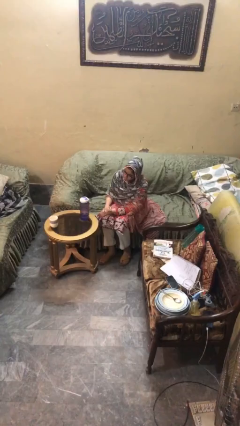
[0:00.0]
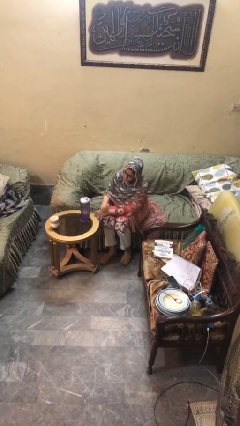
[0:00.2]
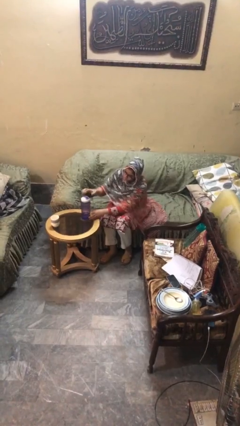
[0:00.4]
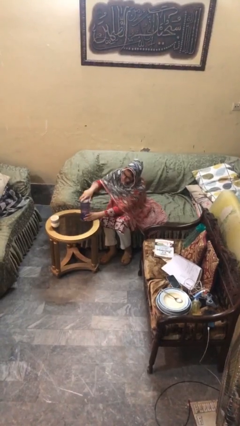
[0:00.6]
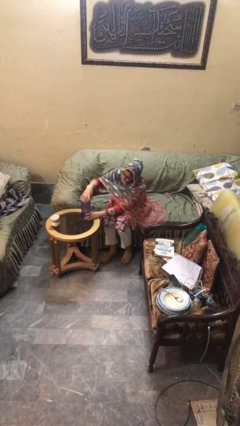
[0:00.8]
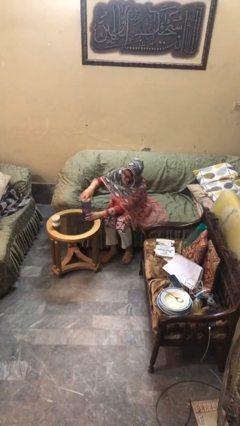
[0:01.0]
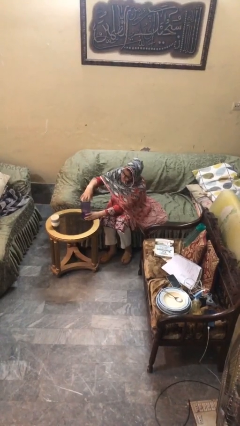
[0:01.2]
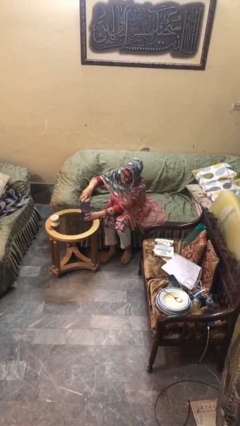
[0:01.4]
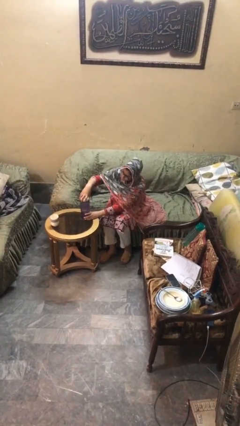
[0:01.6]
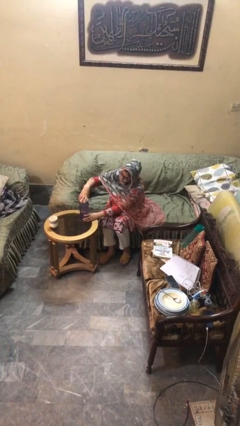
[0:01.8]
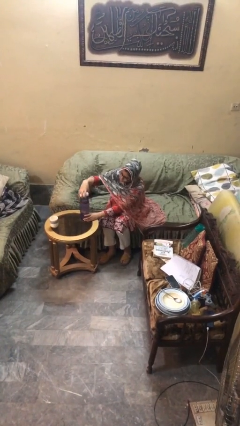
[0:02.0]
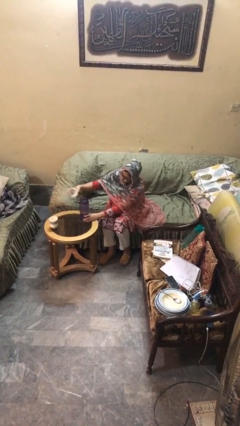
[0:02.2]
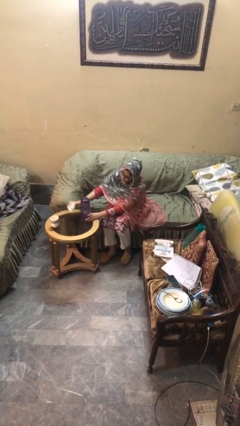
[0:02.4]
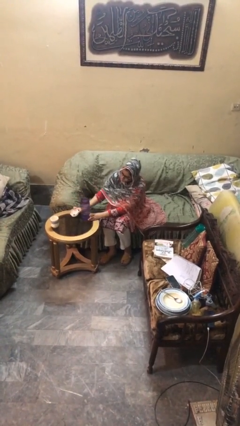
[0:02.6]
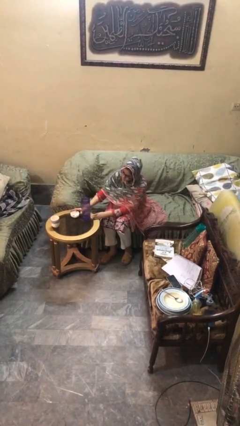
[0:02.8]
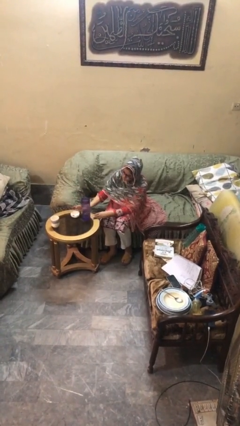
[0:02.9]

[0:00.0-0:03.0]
person unscrews lid from bottle

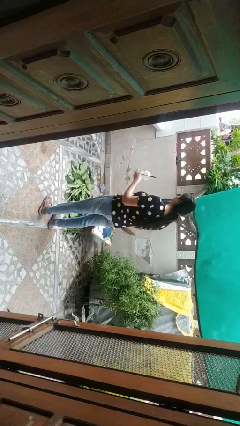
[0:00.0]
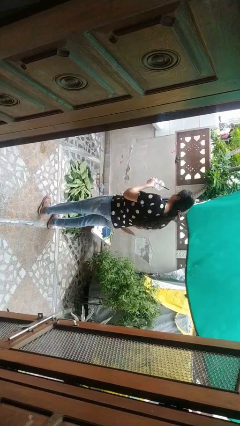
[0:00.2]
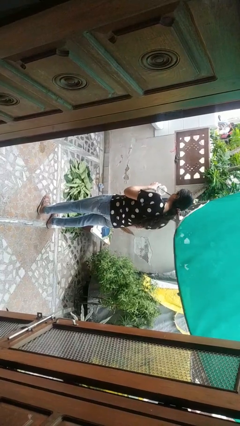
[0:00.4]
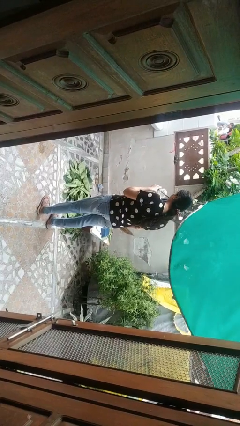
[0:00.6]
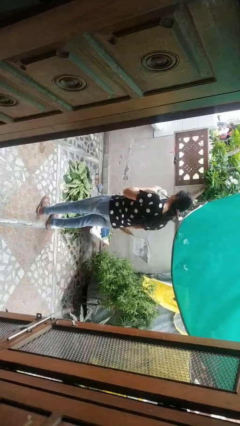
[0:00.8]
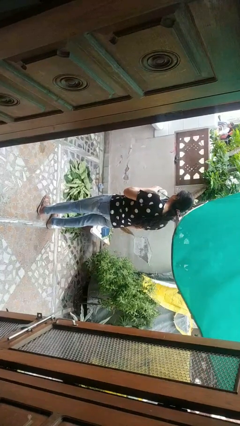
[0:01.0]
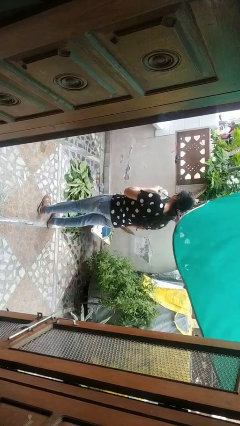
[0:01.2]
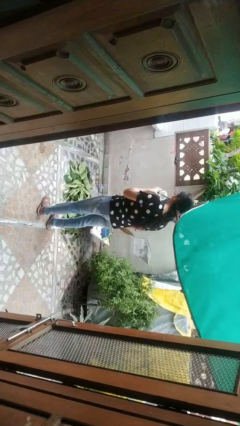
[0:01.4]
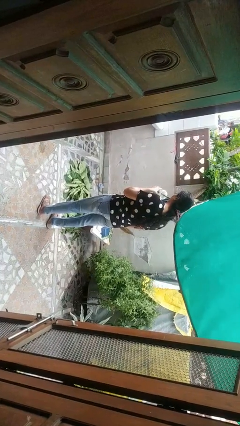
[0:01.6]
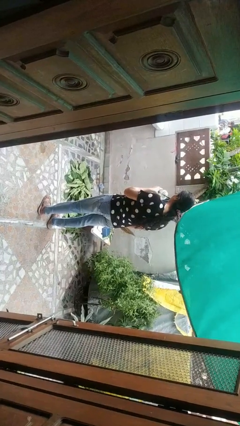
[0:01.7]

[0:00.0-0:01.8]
person drinks from straw

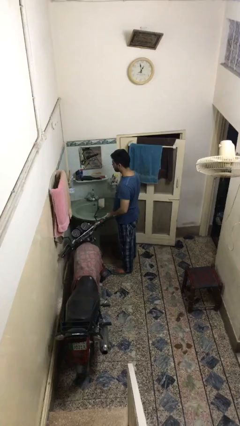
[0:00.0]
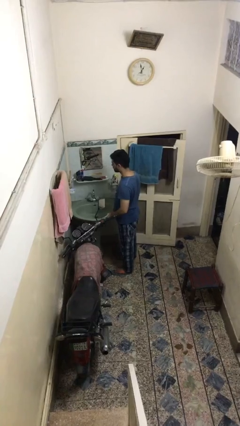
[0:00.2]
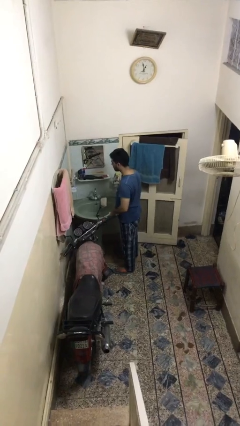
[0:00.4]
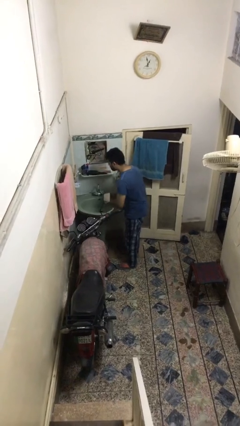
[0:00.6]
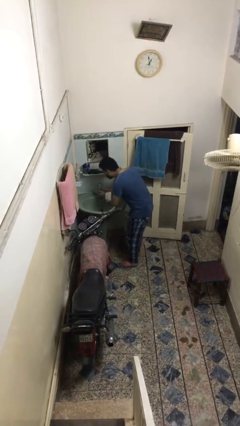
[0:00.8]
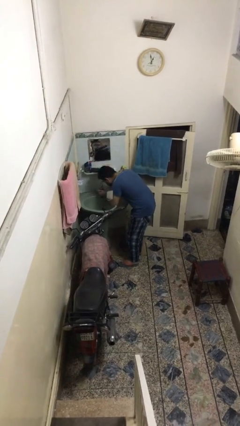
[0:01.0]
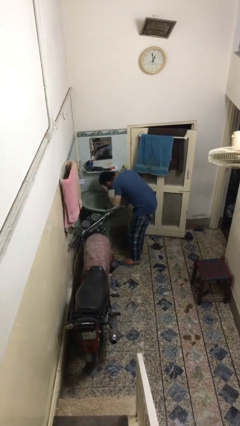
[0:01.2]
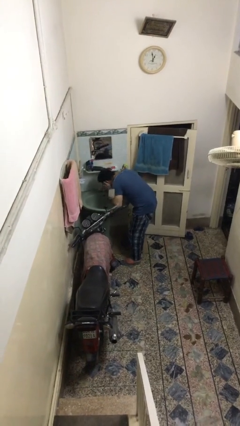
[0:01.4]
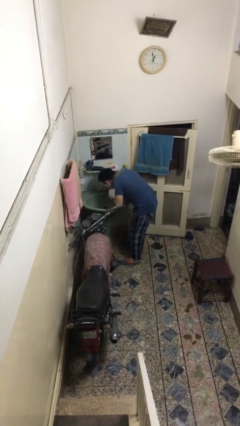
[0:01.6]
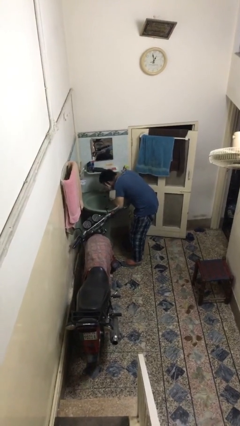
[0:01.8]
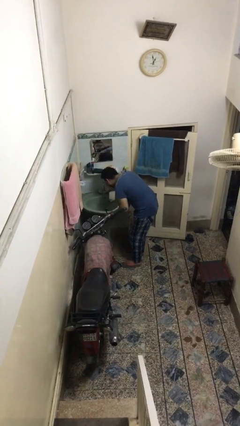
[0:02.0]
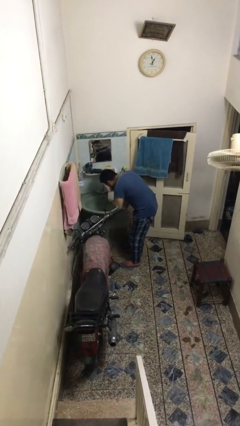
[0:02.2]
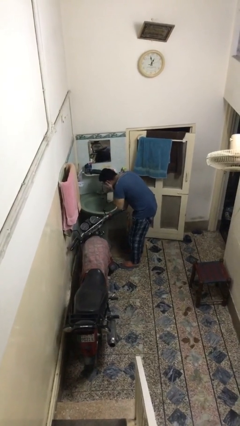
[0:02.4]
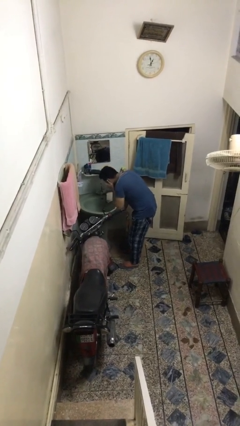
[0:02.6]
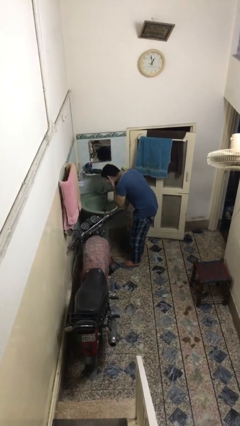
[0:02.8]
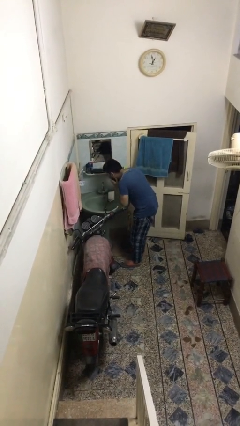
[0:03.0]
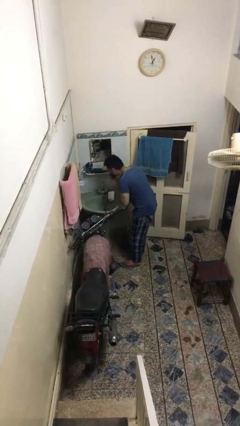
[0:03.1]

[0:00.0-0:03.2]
person washes face

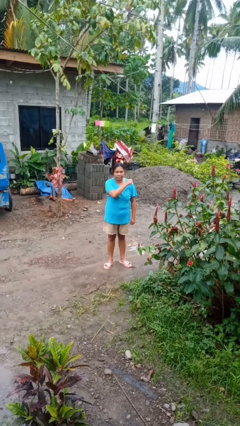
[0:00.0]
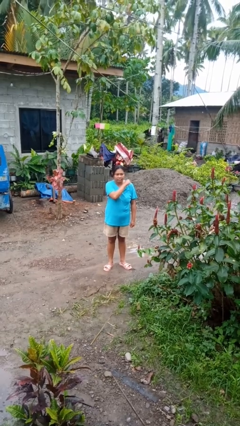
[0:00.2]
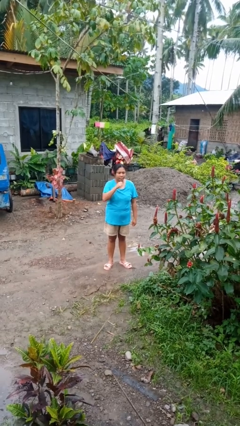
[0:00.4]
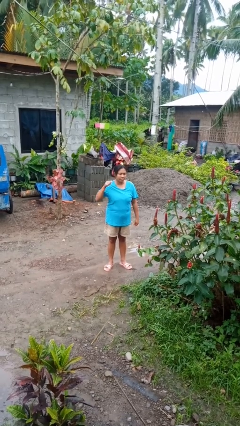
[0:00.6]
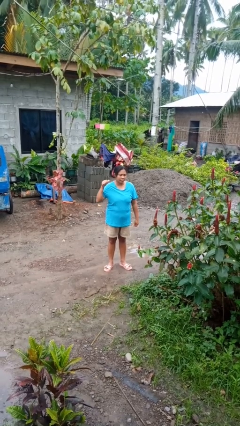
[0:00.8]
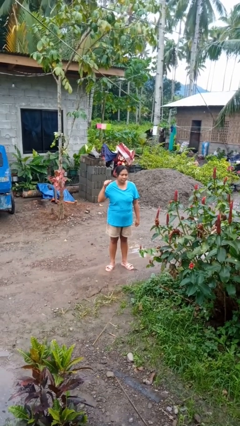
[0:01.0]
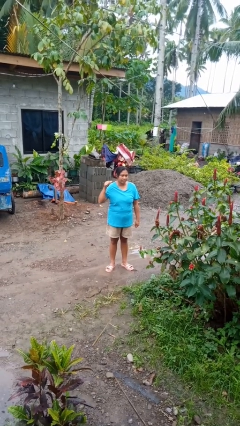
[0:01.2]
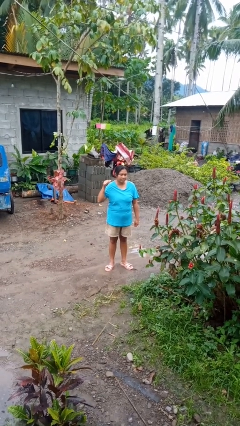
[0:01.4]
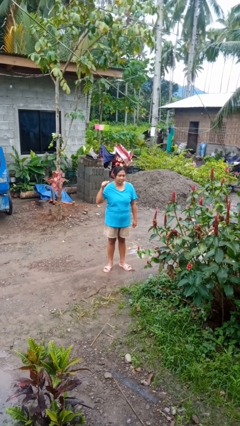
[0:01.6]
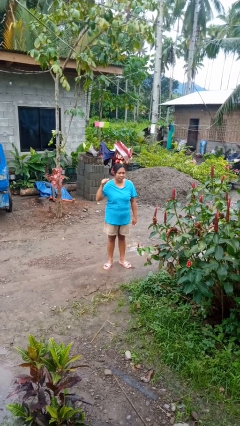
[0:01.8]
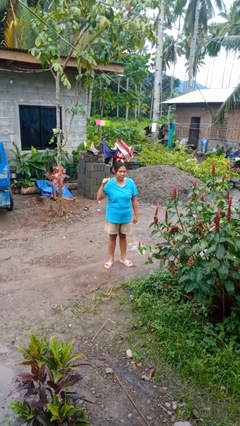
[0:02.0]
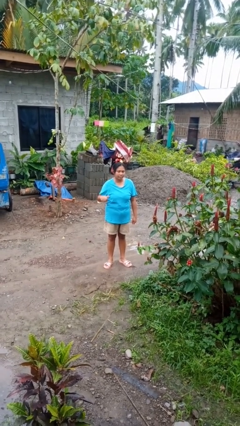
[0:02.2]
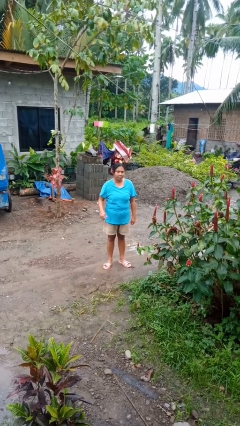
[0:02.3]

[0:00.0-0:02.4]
person gestures cut

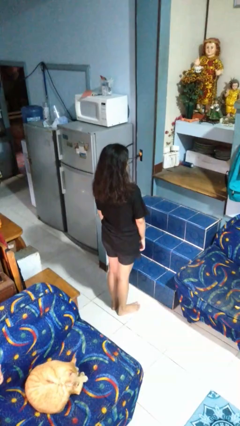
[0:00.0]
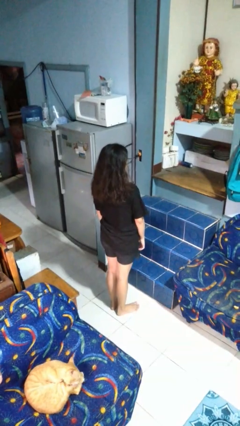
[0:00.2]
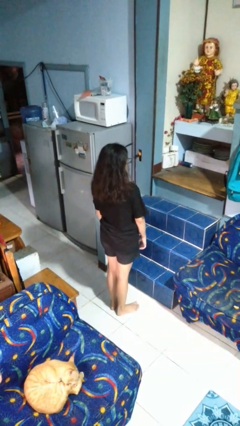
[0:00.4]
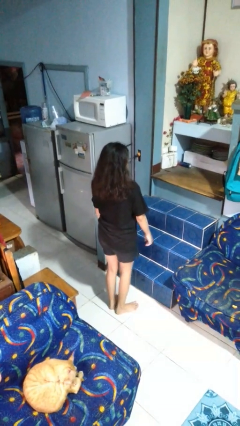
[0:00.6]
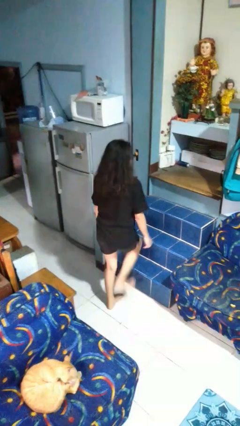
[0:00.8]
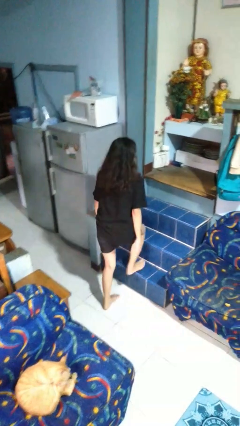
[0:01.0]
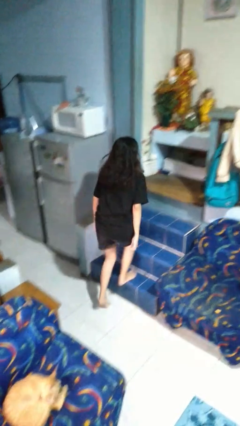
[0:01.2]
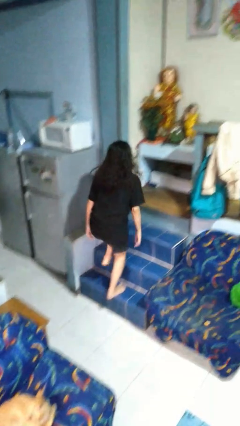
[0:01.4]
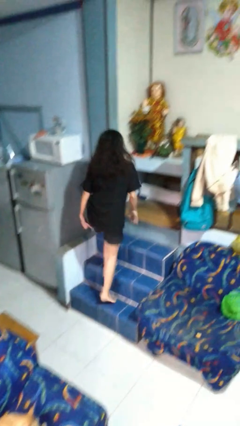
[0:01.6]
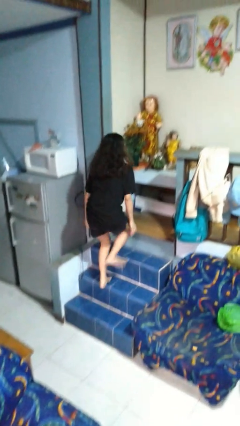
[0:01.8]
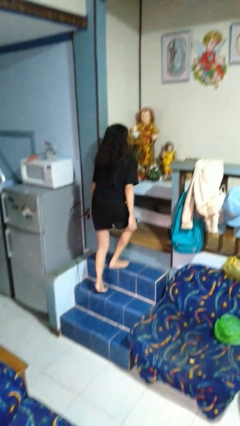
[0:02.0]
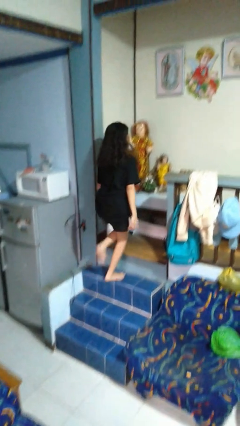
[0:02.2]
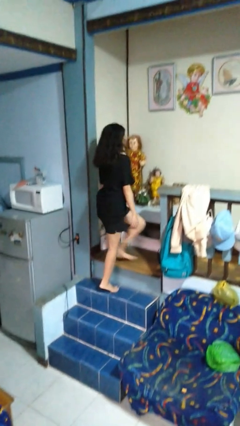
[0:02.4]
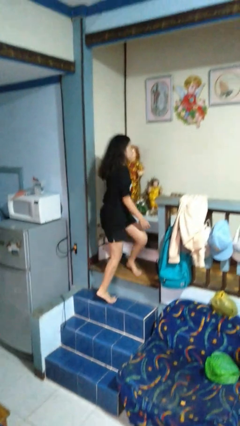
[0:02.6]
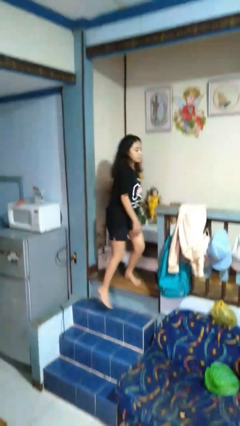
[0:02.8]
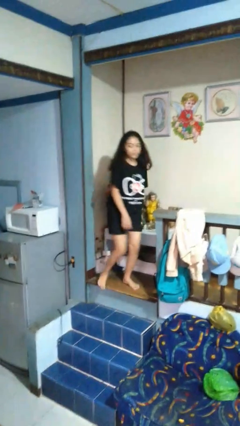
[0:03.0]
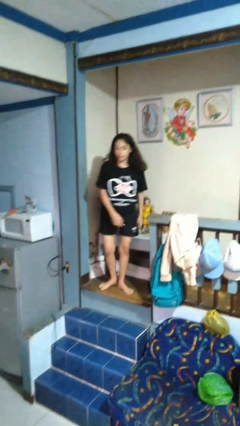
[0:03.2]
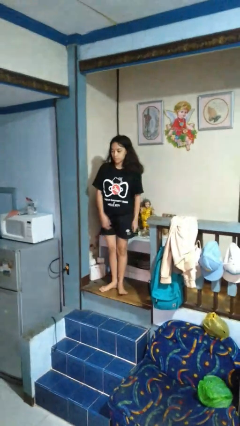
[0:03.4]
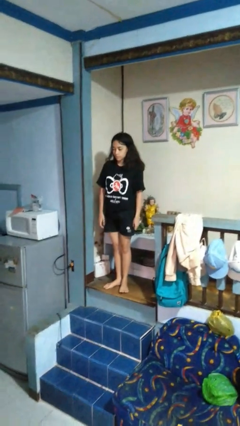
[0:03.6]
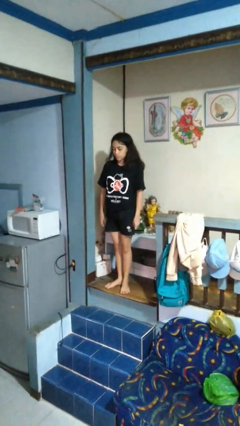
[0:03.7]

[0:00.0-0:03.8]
person climbs up stairs

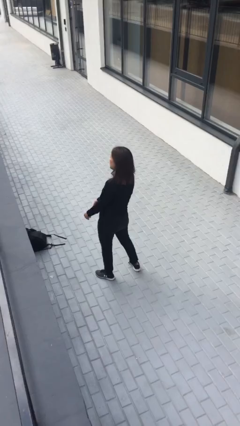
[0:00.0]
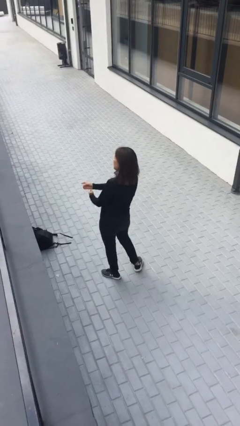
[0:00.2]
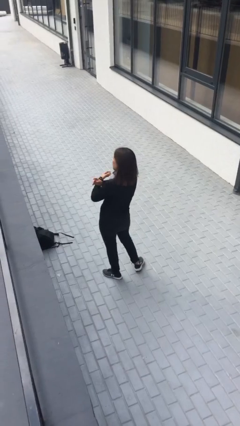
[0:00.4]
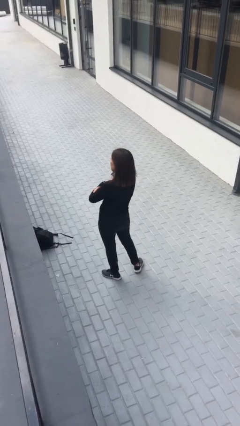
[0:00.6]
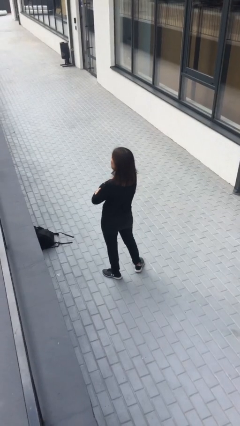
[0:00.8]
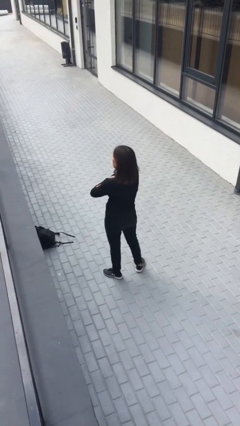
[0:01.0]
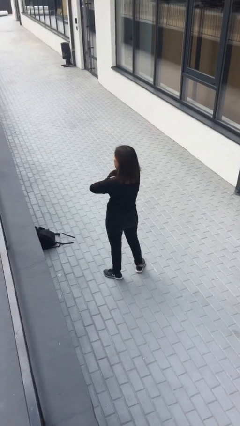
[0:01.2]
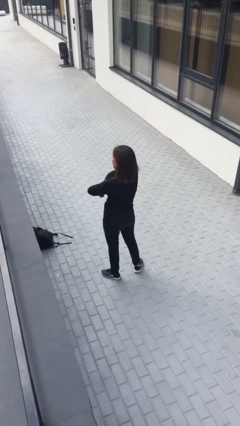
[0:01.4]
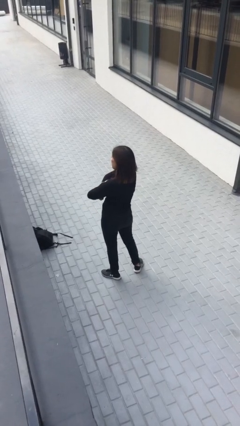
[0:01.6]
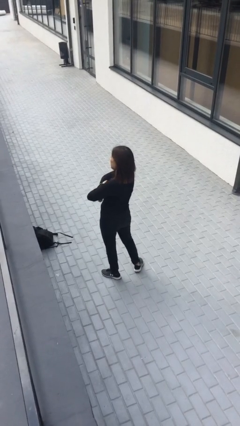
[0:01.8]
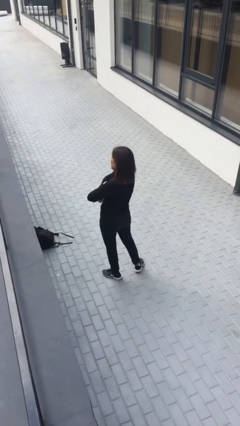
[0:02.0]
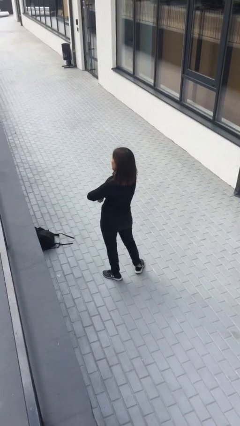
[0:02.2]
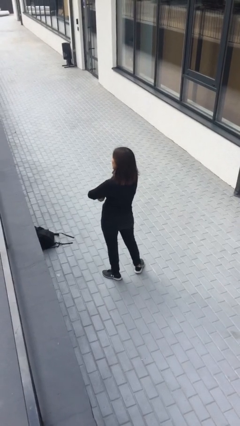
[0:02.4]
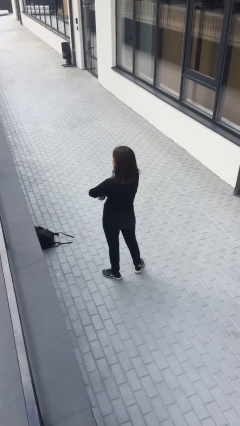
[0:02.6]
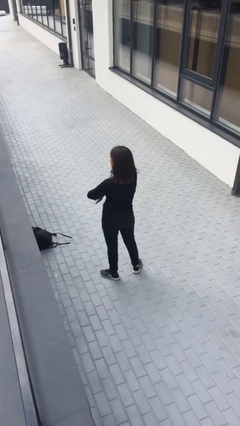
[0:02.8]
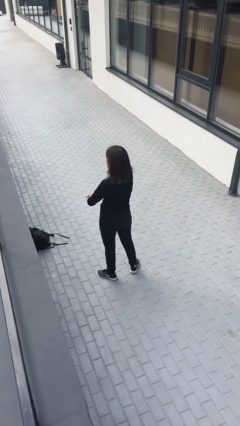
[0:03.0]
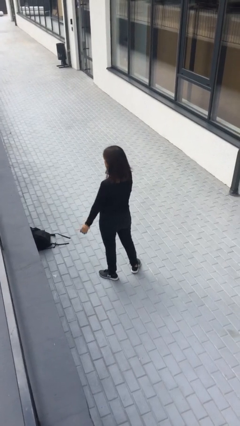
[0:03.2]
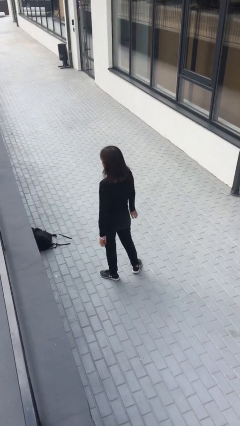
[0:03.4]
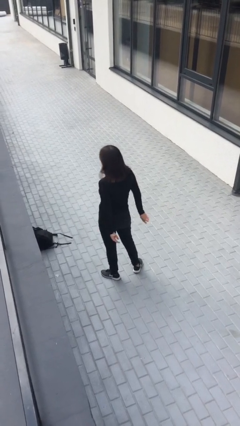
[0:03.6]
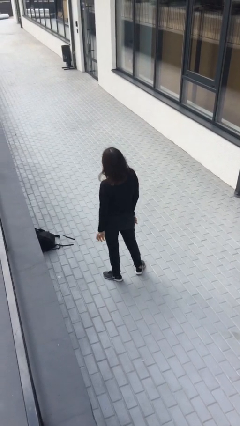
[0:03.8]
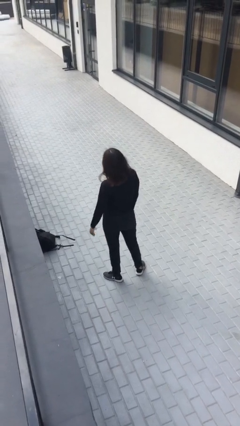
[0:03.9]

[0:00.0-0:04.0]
person crosses arms
